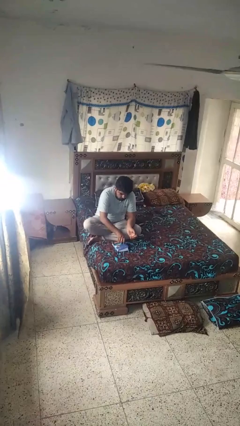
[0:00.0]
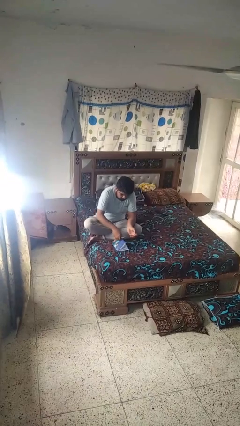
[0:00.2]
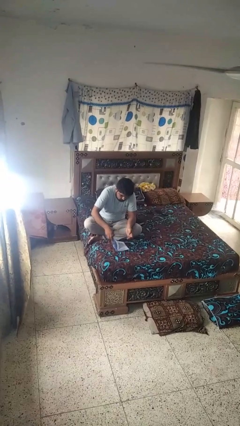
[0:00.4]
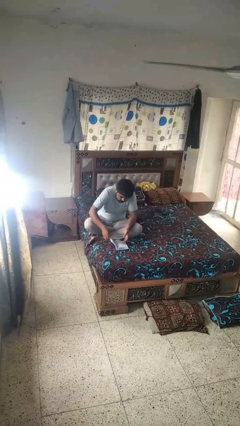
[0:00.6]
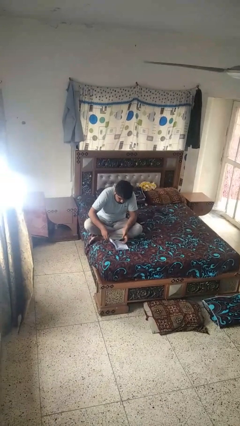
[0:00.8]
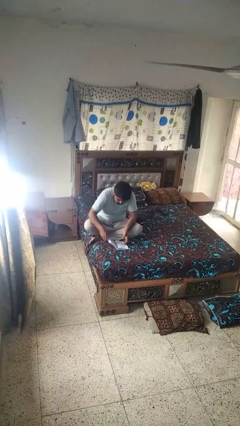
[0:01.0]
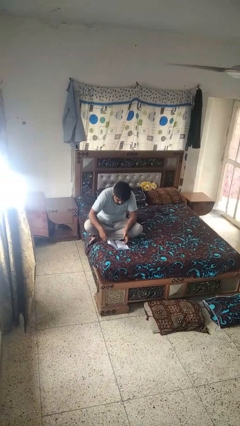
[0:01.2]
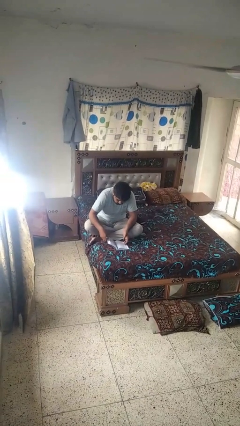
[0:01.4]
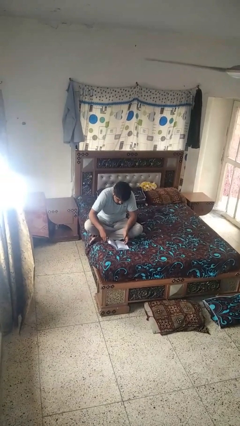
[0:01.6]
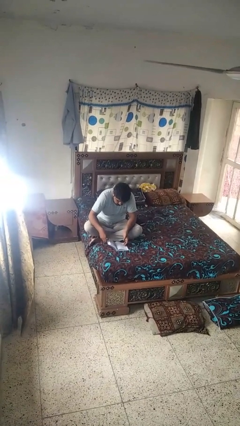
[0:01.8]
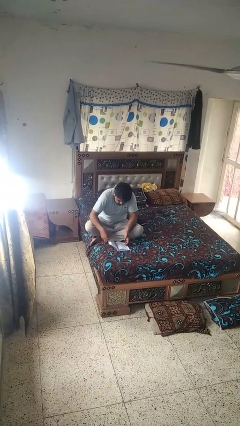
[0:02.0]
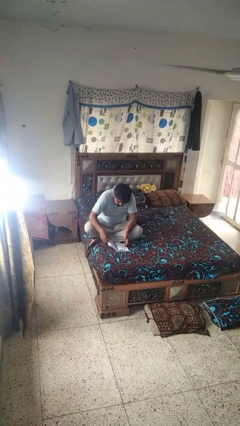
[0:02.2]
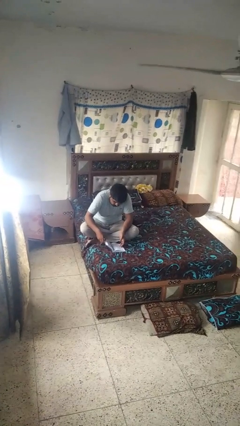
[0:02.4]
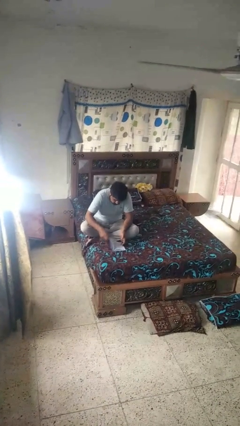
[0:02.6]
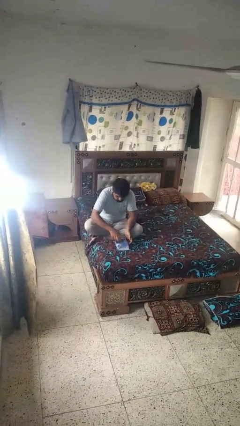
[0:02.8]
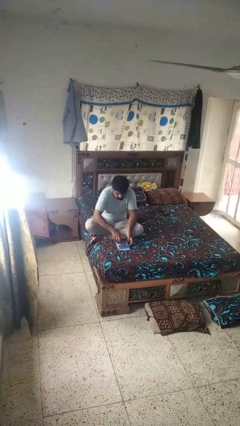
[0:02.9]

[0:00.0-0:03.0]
person reads book

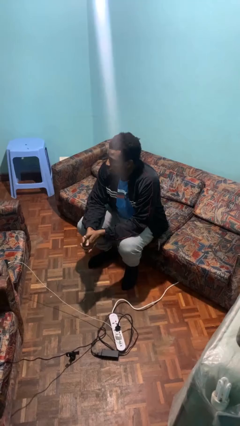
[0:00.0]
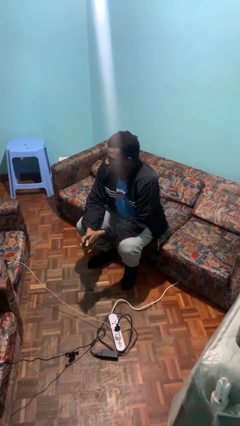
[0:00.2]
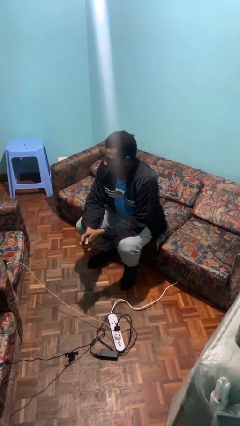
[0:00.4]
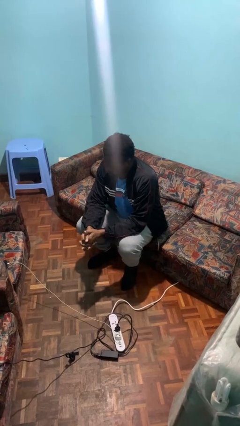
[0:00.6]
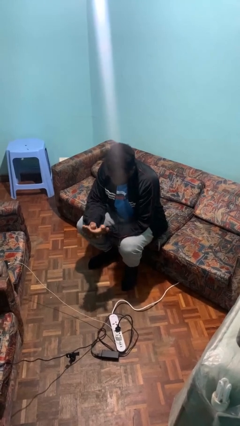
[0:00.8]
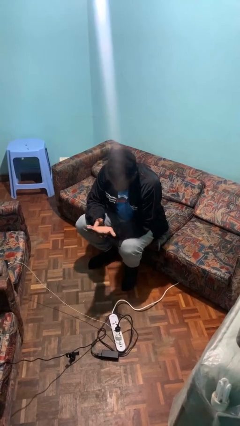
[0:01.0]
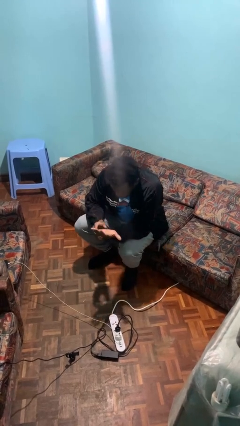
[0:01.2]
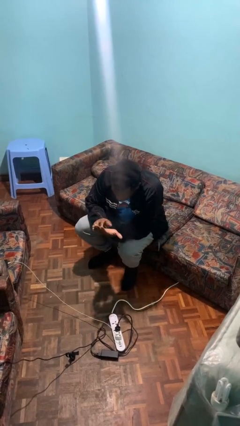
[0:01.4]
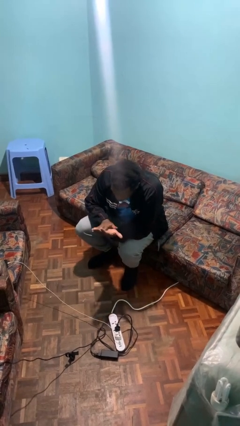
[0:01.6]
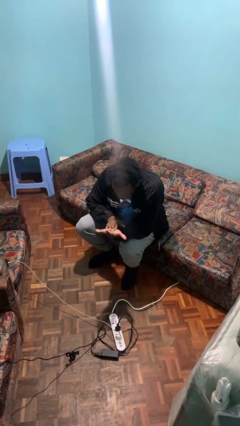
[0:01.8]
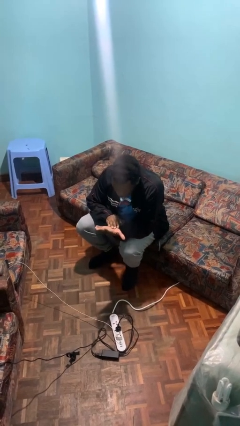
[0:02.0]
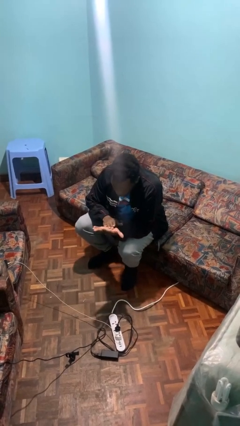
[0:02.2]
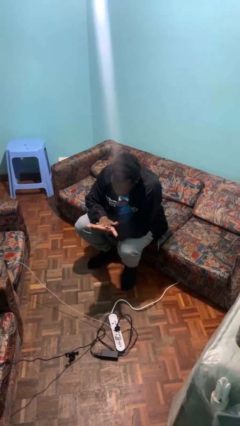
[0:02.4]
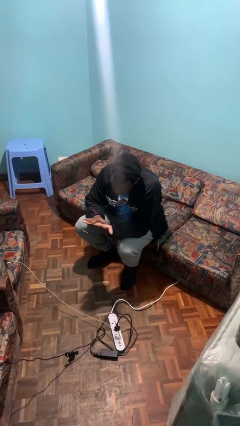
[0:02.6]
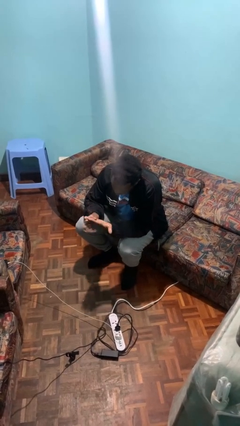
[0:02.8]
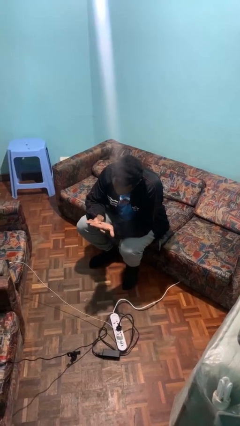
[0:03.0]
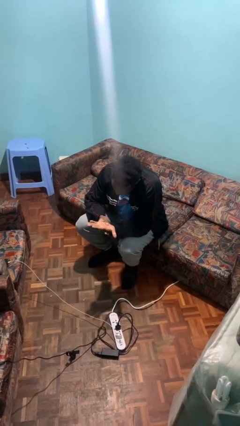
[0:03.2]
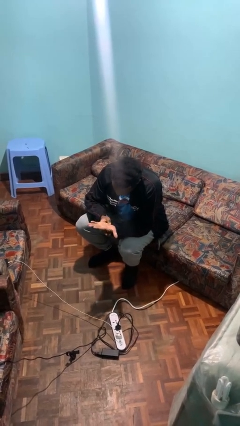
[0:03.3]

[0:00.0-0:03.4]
person looks at hands in lap

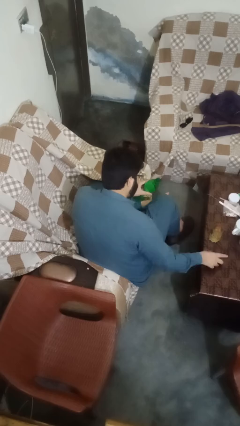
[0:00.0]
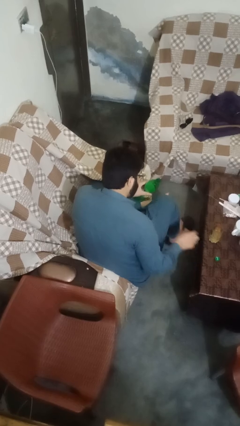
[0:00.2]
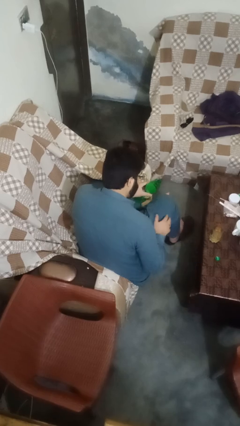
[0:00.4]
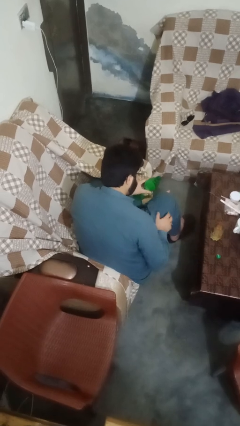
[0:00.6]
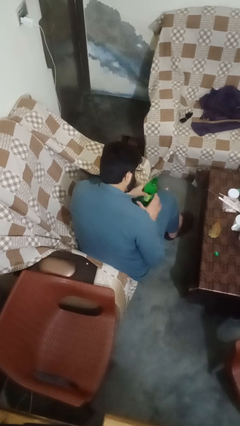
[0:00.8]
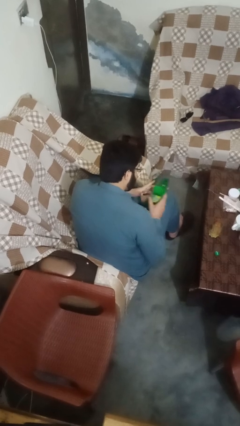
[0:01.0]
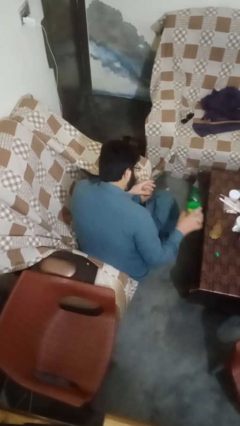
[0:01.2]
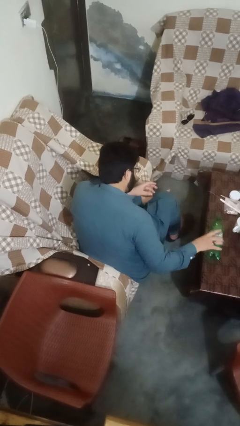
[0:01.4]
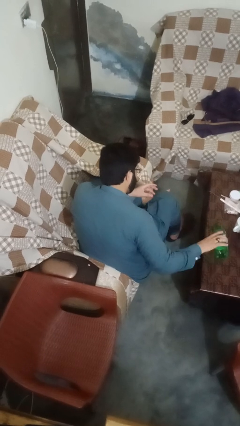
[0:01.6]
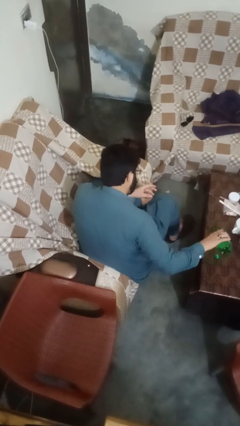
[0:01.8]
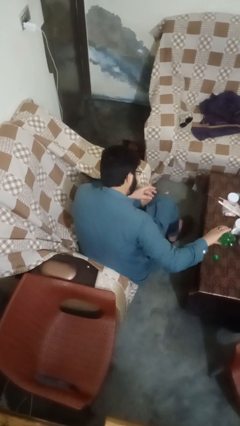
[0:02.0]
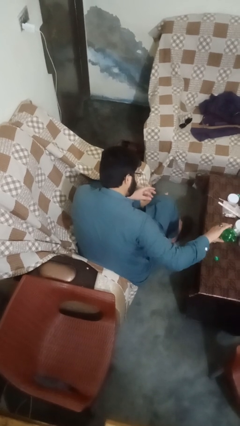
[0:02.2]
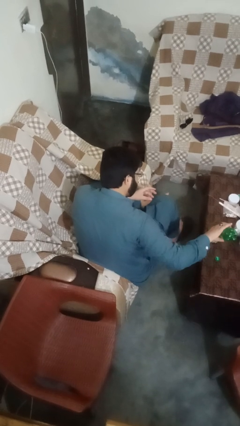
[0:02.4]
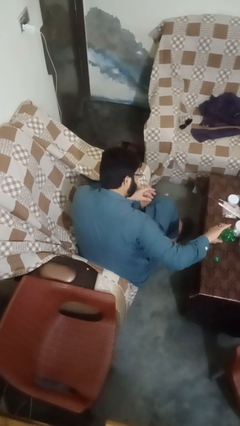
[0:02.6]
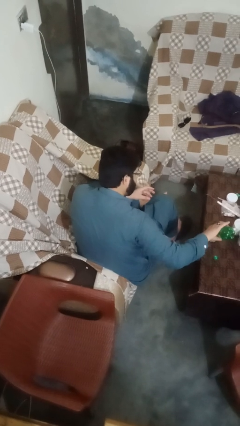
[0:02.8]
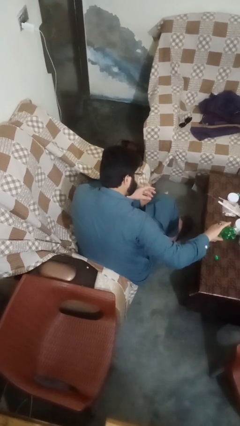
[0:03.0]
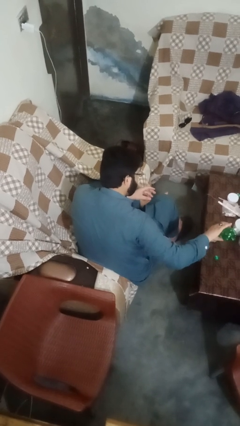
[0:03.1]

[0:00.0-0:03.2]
person pours liquid into cup

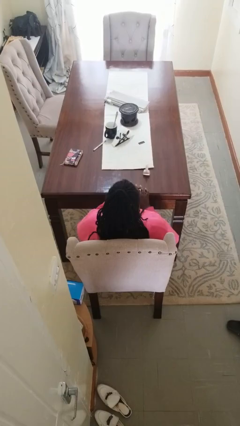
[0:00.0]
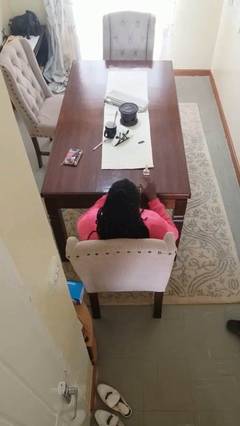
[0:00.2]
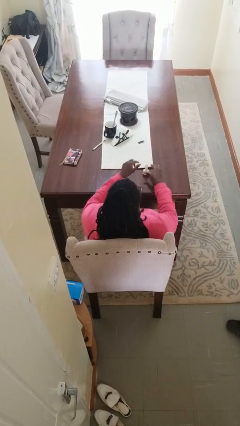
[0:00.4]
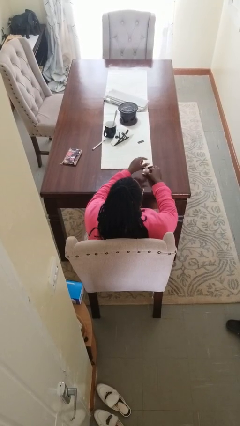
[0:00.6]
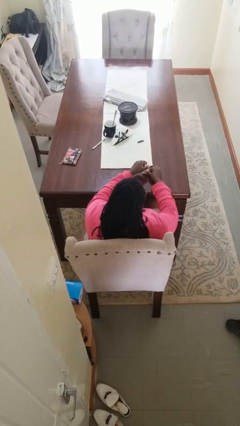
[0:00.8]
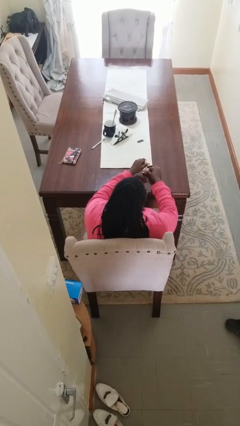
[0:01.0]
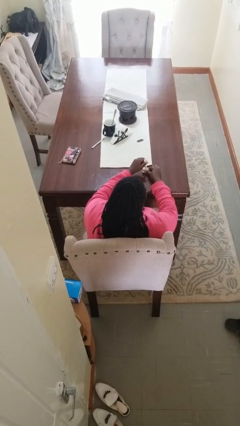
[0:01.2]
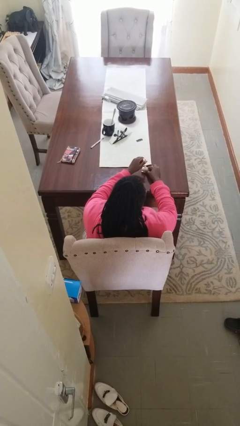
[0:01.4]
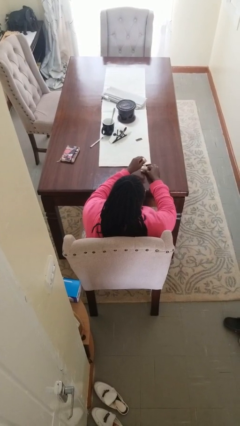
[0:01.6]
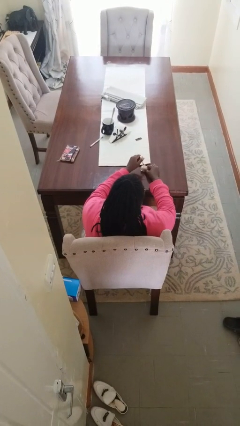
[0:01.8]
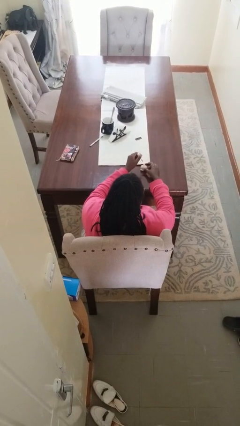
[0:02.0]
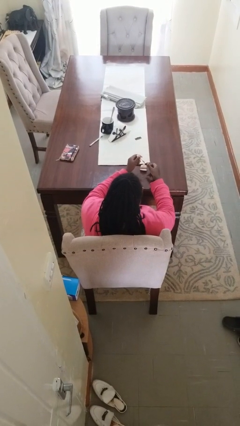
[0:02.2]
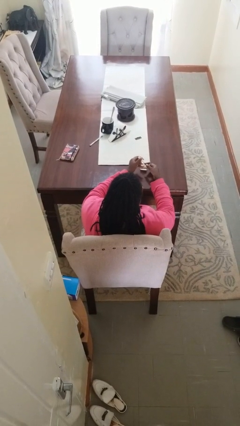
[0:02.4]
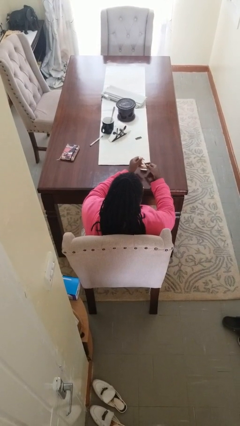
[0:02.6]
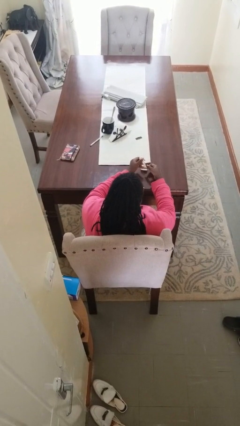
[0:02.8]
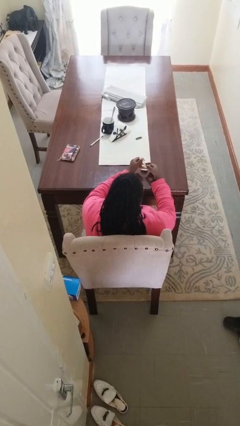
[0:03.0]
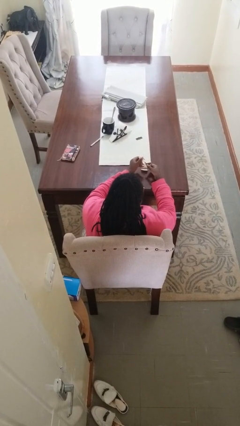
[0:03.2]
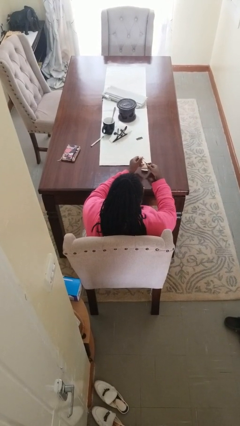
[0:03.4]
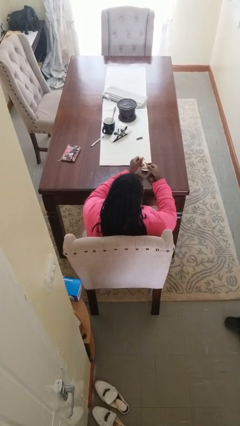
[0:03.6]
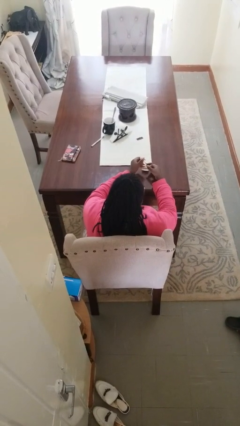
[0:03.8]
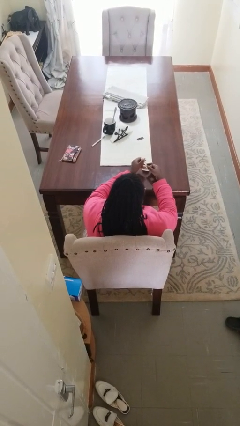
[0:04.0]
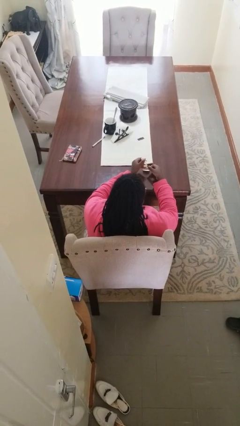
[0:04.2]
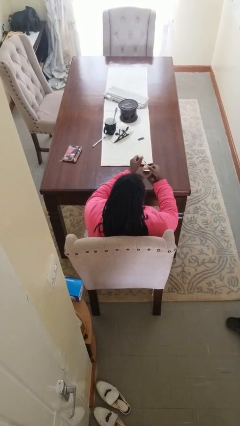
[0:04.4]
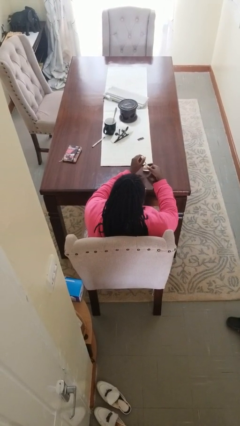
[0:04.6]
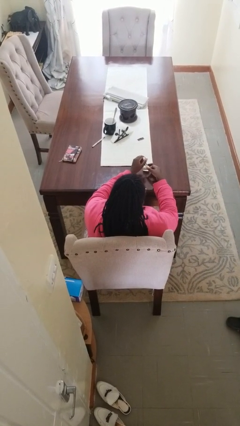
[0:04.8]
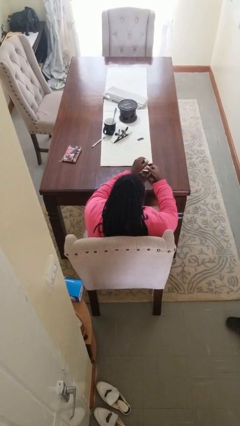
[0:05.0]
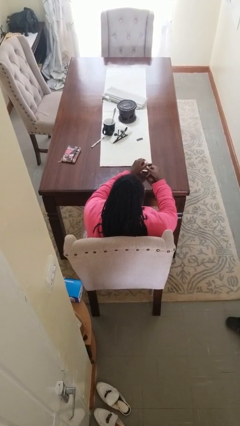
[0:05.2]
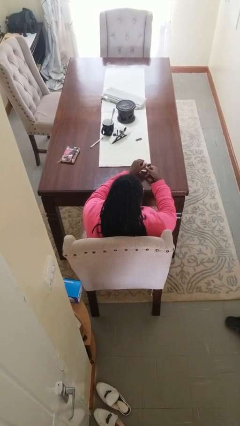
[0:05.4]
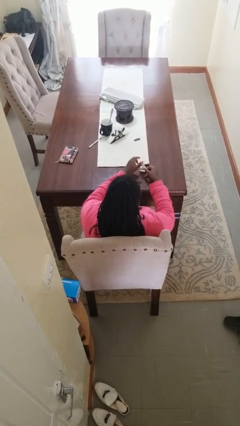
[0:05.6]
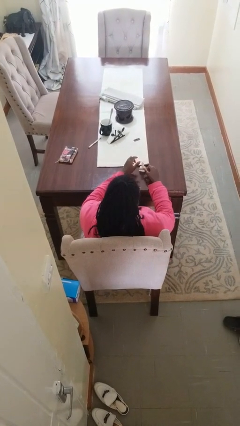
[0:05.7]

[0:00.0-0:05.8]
person paints fingernails

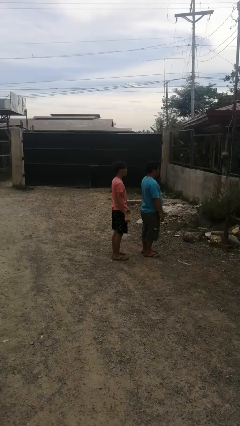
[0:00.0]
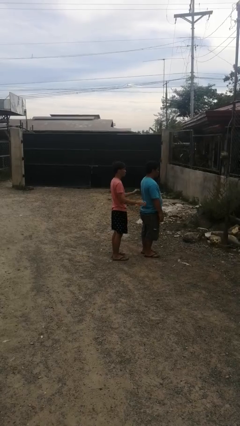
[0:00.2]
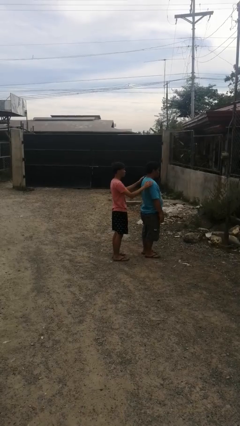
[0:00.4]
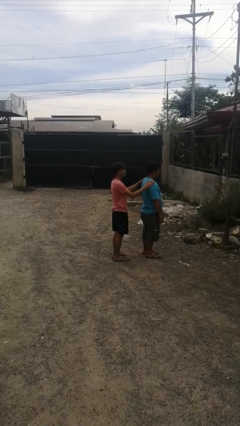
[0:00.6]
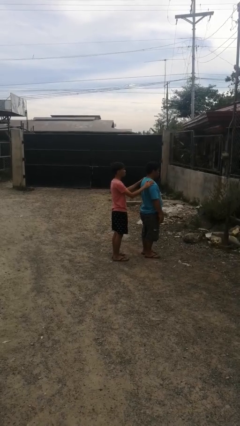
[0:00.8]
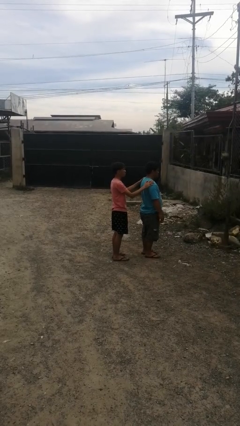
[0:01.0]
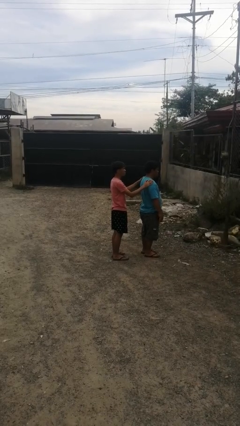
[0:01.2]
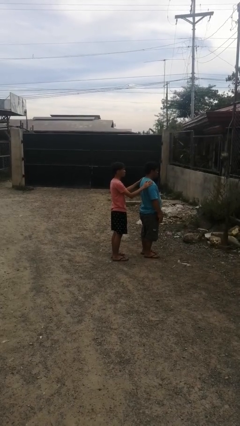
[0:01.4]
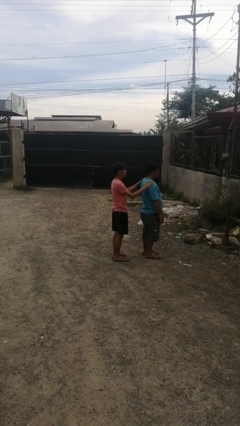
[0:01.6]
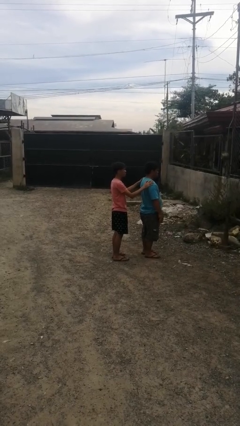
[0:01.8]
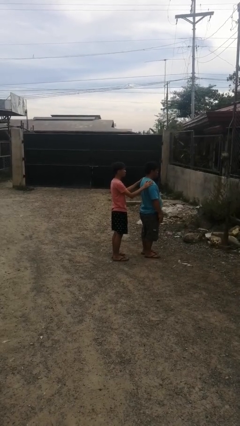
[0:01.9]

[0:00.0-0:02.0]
person grabs person by shoulder

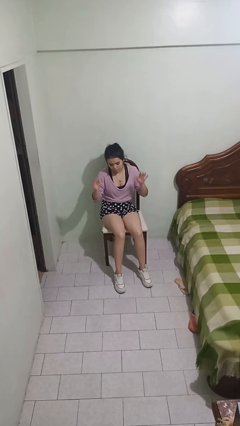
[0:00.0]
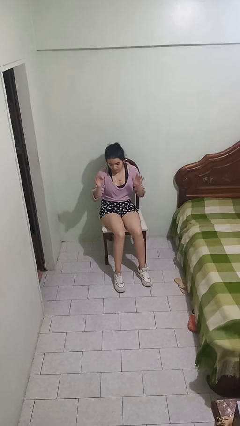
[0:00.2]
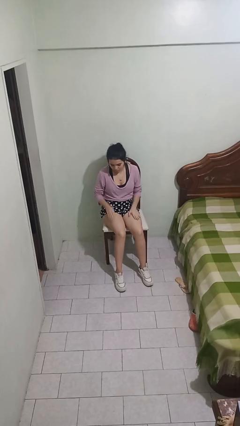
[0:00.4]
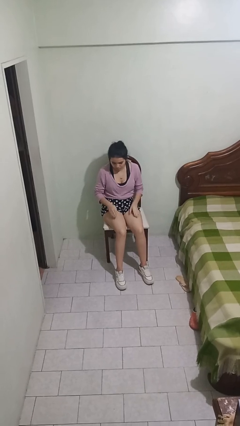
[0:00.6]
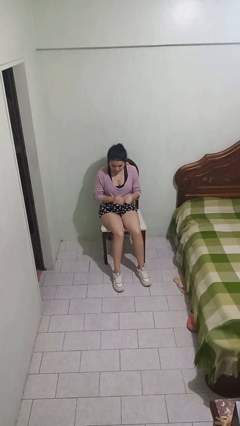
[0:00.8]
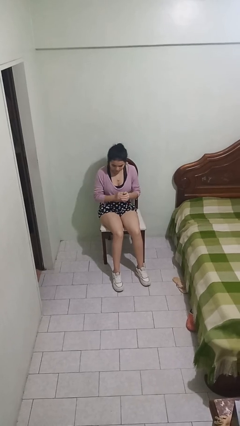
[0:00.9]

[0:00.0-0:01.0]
person slaps hands on thighs
